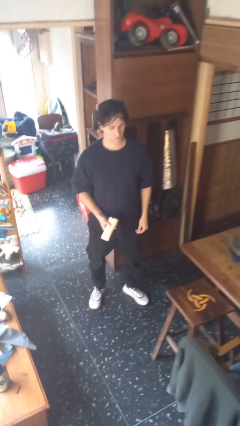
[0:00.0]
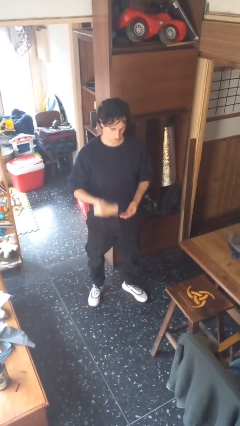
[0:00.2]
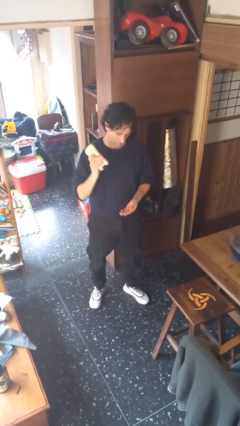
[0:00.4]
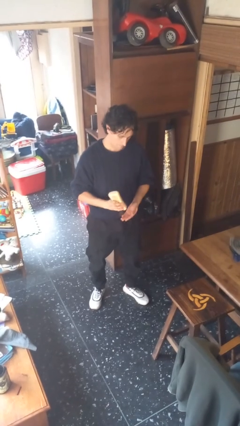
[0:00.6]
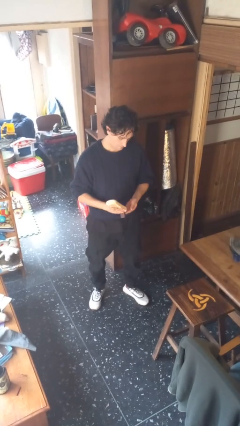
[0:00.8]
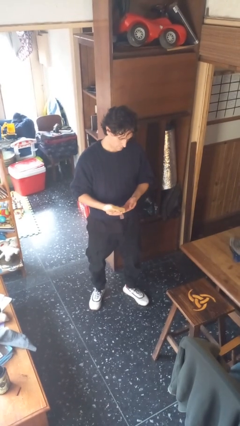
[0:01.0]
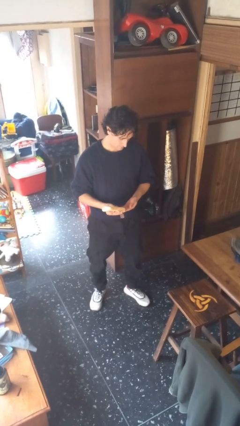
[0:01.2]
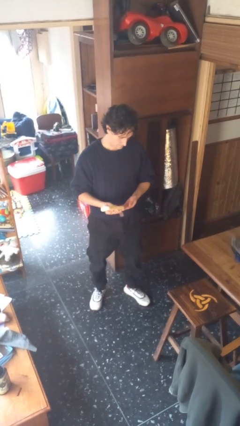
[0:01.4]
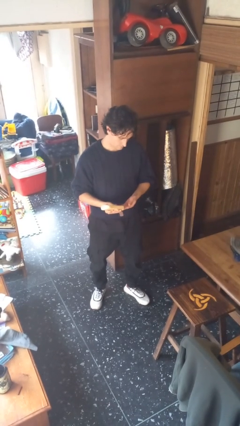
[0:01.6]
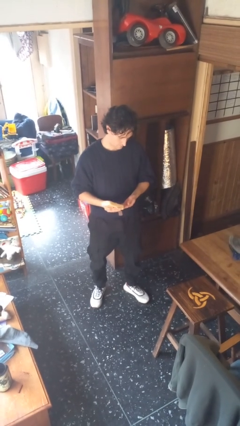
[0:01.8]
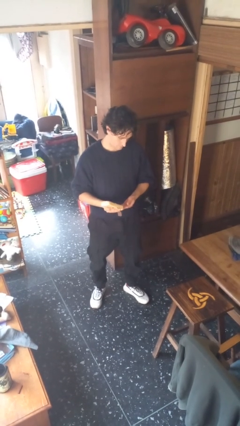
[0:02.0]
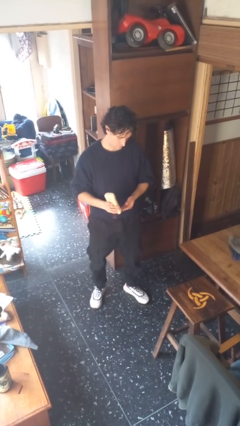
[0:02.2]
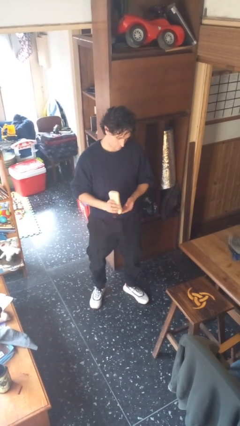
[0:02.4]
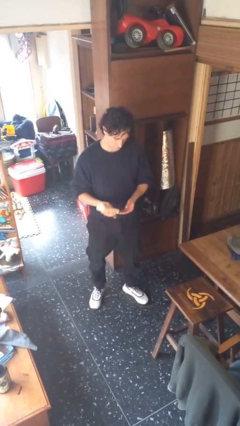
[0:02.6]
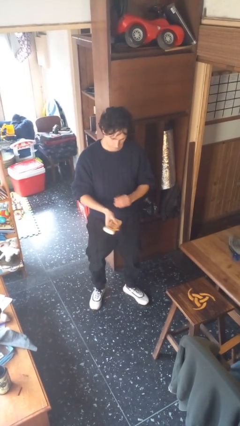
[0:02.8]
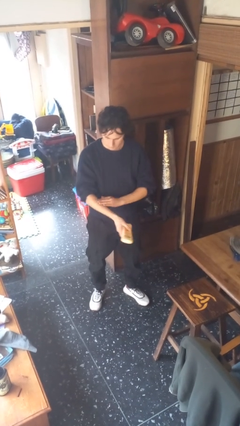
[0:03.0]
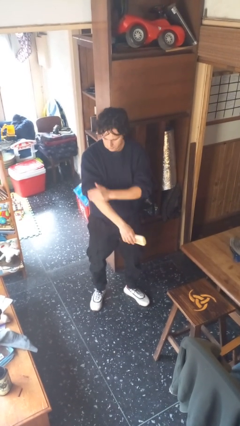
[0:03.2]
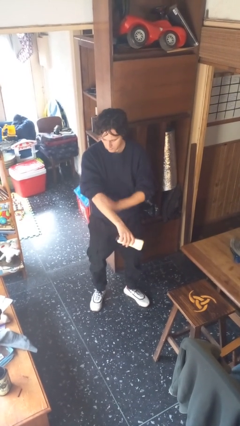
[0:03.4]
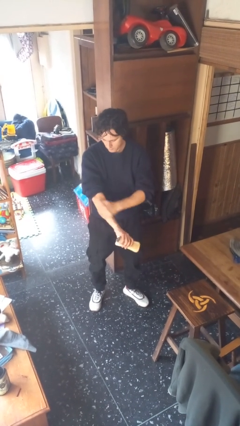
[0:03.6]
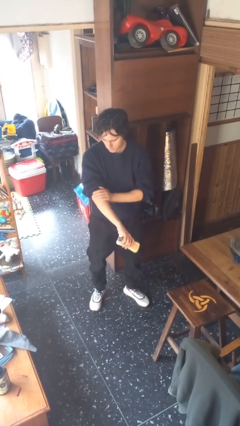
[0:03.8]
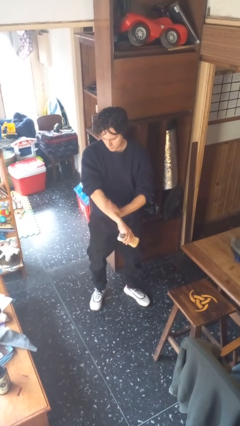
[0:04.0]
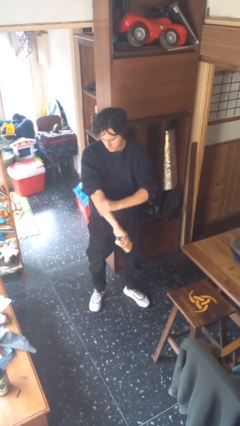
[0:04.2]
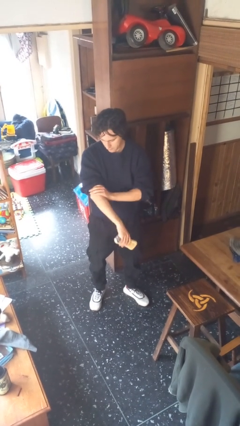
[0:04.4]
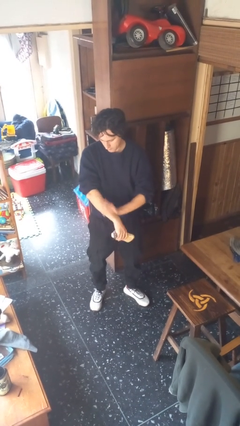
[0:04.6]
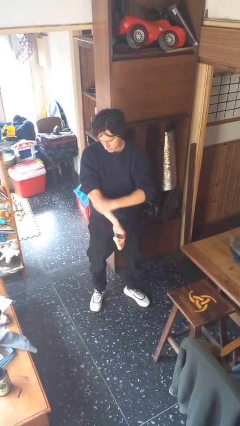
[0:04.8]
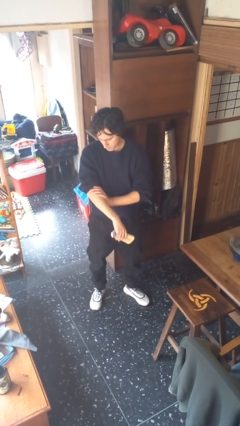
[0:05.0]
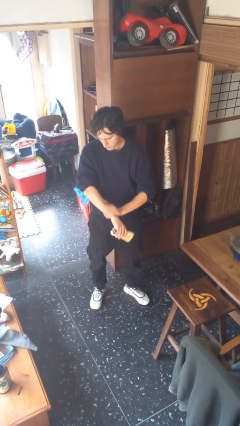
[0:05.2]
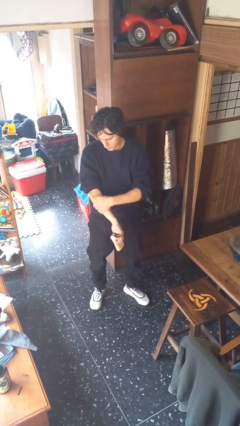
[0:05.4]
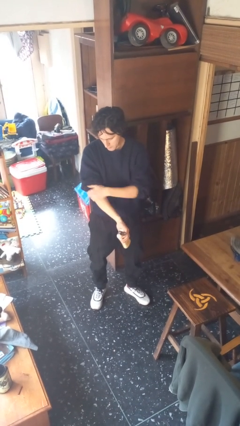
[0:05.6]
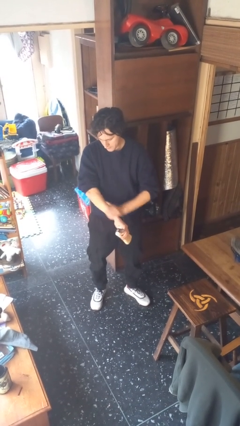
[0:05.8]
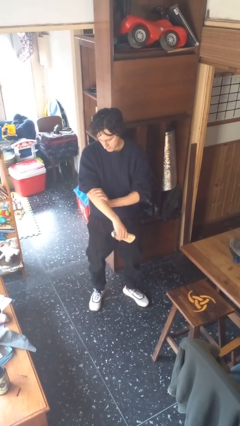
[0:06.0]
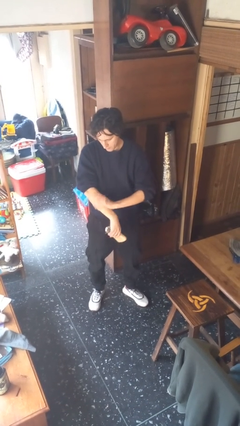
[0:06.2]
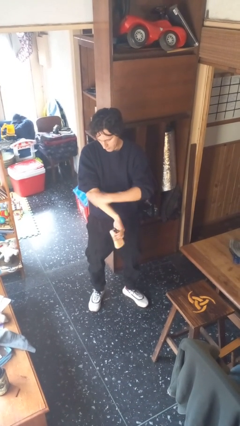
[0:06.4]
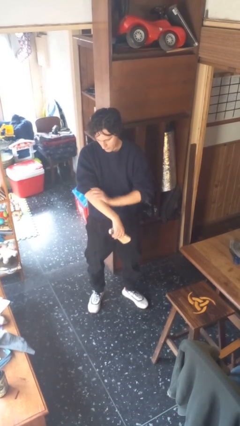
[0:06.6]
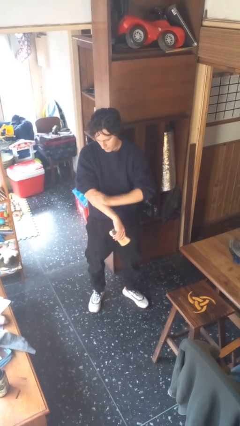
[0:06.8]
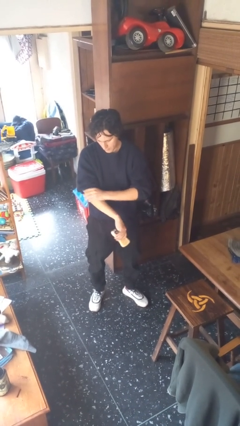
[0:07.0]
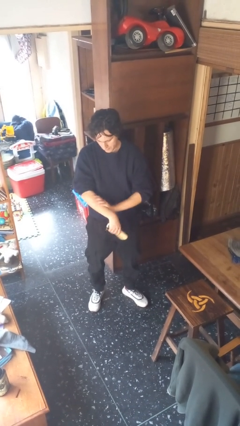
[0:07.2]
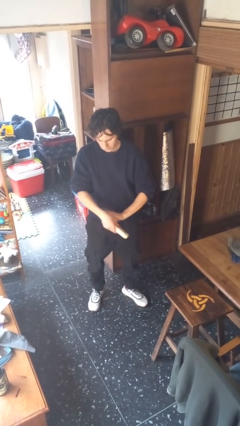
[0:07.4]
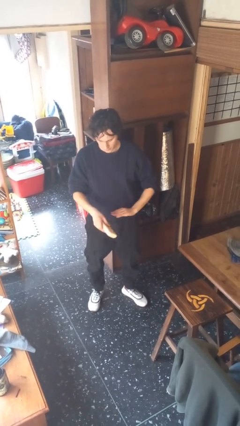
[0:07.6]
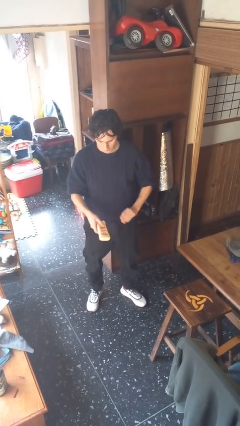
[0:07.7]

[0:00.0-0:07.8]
person applies sunscreen

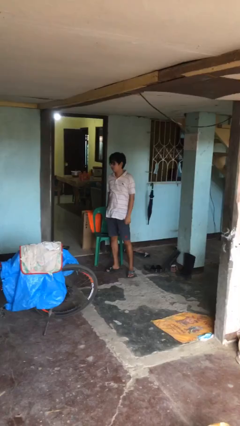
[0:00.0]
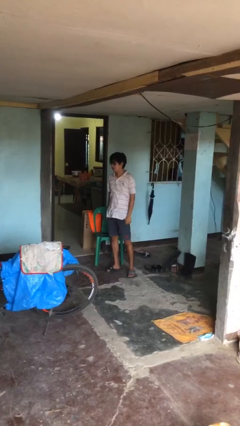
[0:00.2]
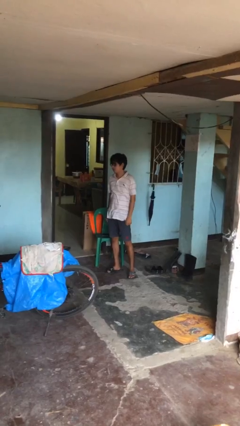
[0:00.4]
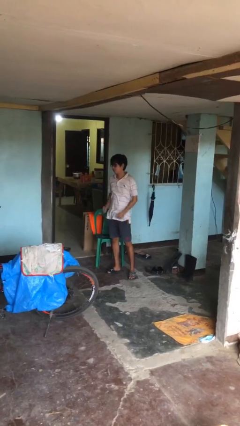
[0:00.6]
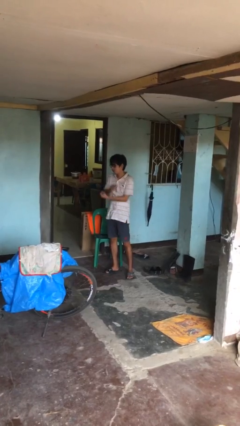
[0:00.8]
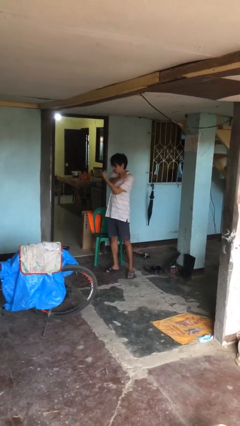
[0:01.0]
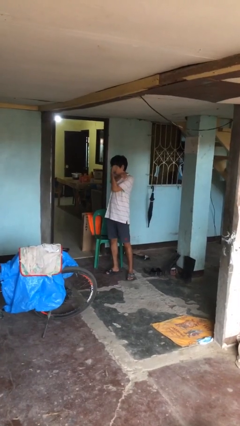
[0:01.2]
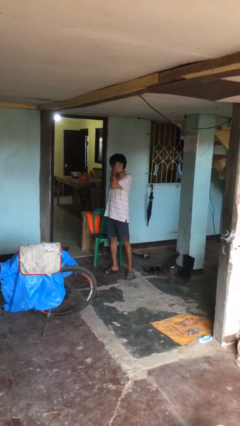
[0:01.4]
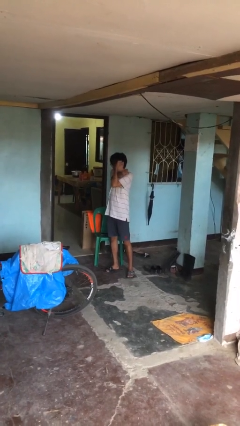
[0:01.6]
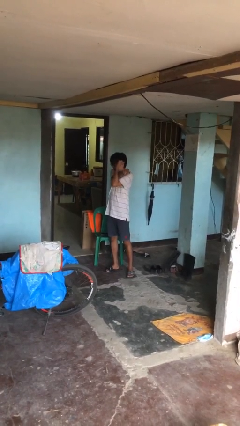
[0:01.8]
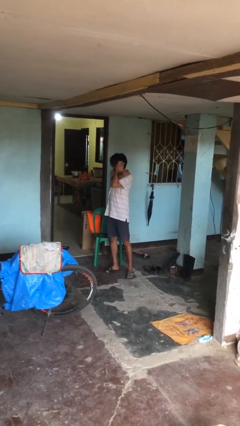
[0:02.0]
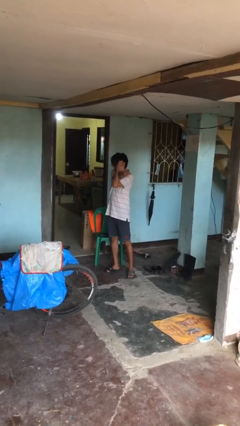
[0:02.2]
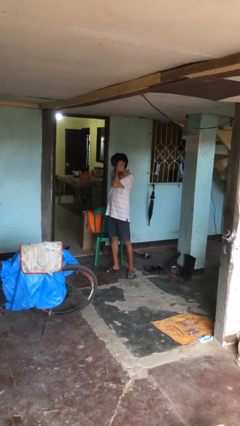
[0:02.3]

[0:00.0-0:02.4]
person crosses arms

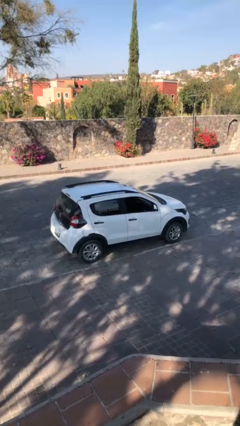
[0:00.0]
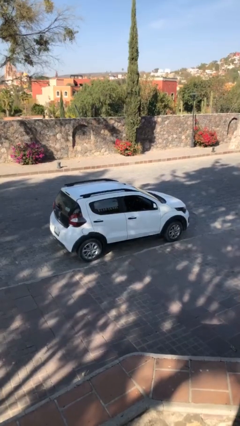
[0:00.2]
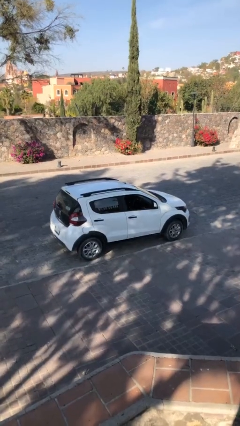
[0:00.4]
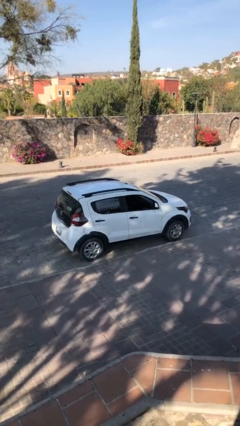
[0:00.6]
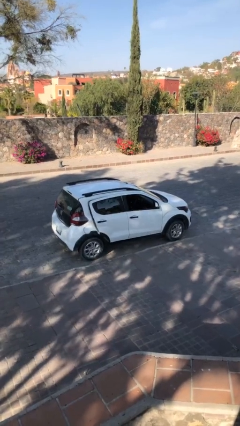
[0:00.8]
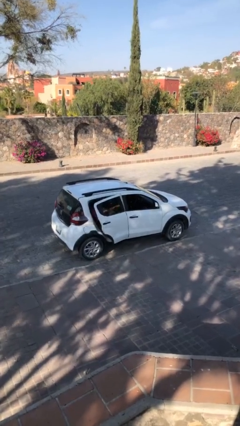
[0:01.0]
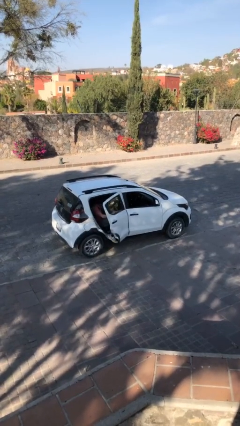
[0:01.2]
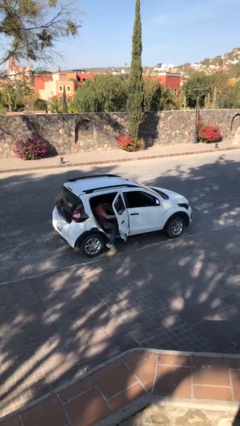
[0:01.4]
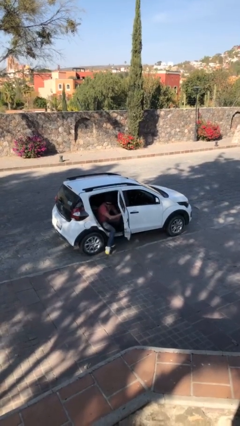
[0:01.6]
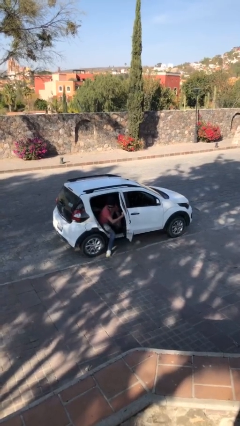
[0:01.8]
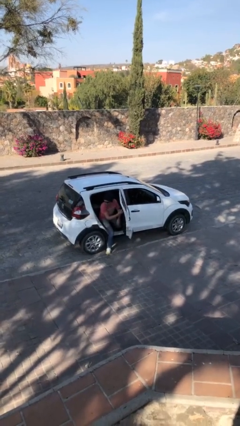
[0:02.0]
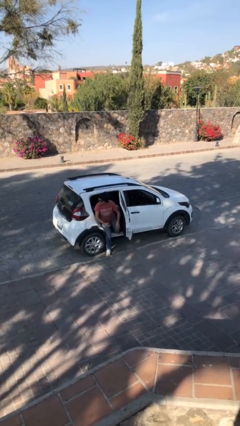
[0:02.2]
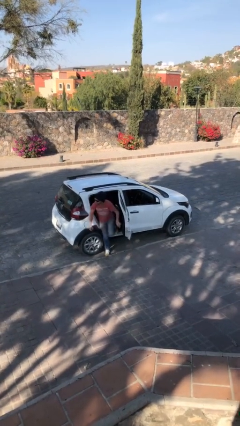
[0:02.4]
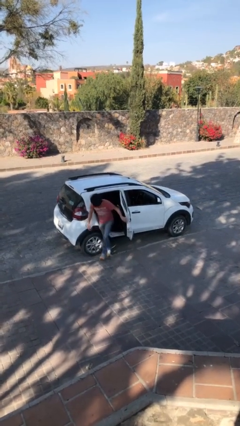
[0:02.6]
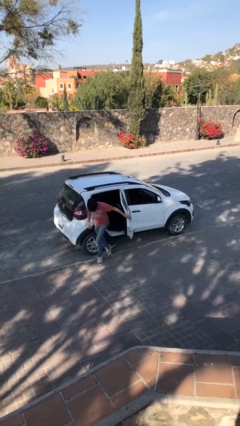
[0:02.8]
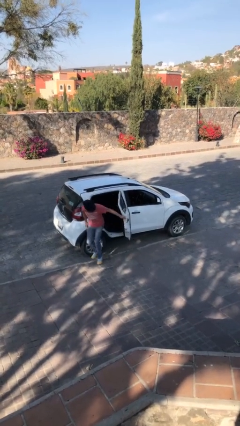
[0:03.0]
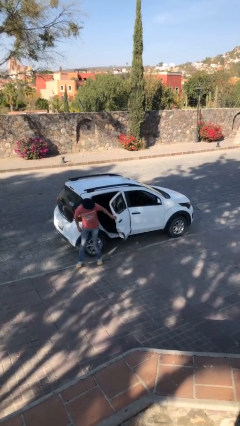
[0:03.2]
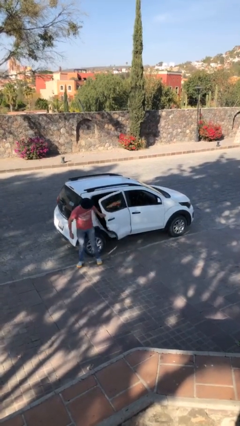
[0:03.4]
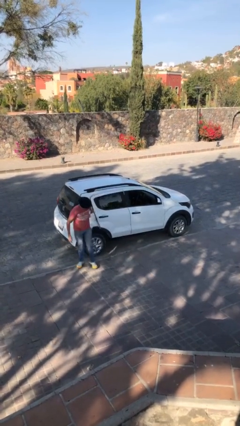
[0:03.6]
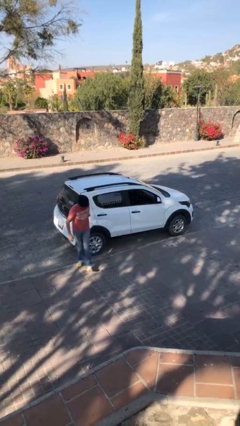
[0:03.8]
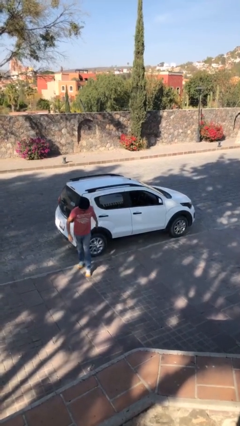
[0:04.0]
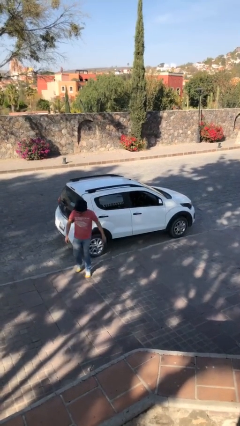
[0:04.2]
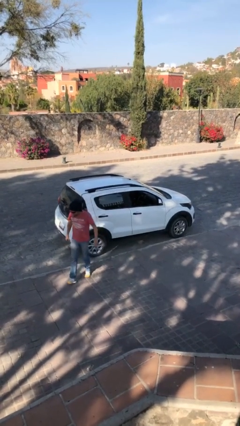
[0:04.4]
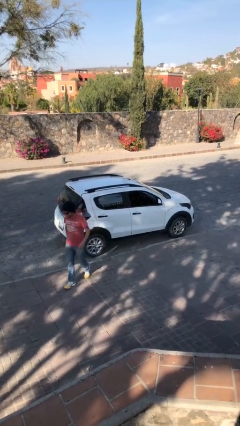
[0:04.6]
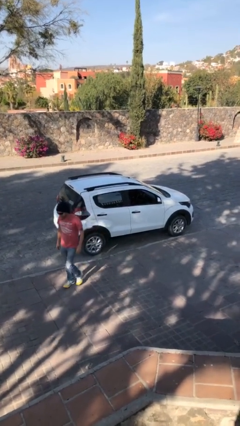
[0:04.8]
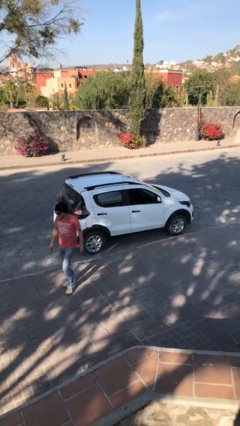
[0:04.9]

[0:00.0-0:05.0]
car drops off person

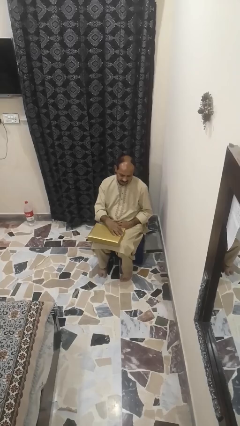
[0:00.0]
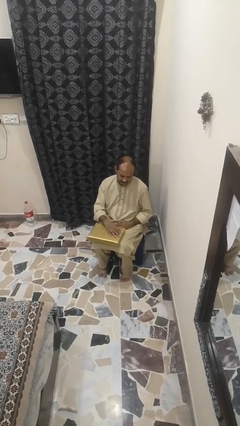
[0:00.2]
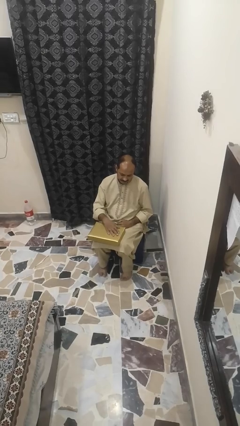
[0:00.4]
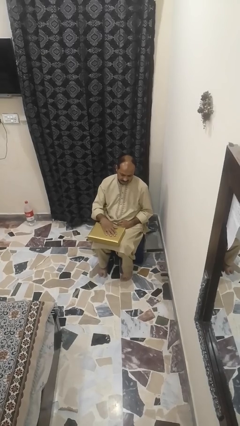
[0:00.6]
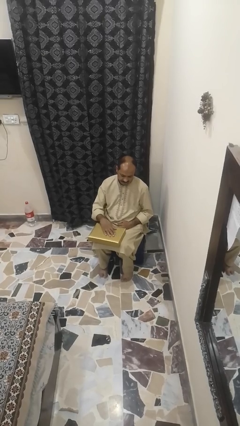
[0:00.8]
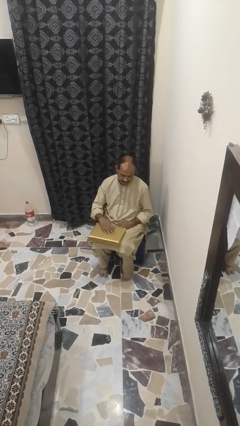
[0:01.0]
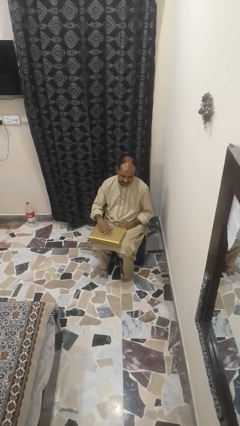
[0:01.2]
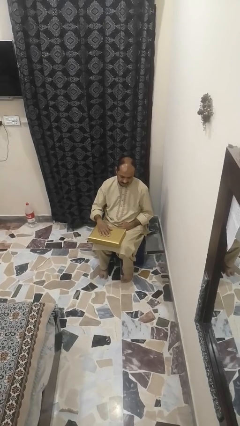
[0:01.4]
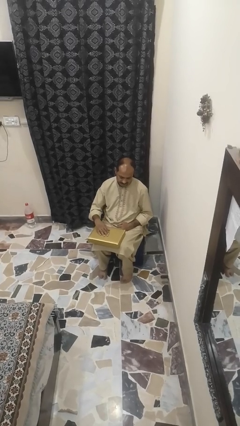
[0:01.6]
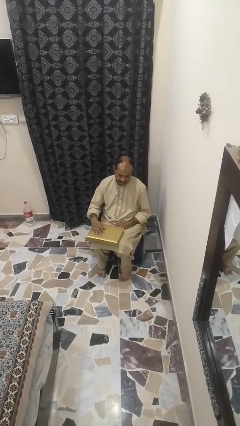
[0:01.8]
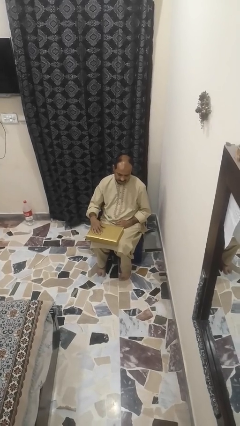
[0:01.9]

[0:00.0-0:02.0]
person waves hand over object

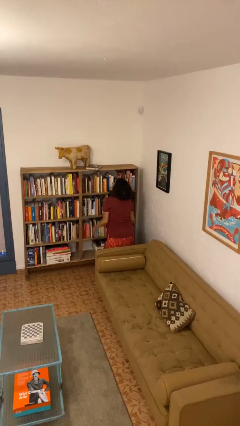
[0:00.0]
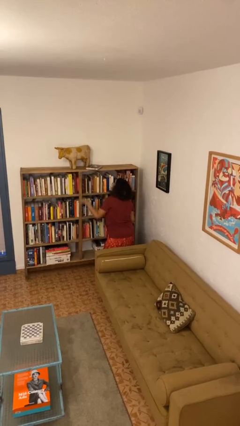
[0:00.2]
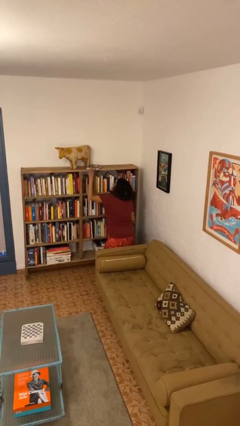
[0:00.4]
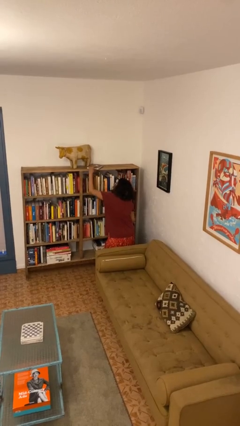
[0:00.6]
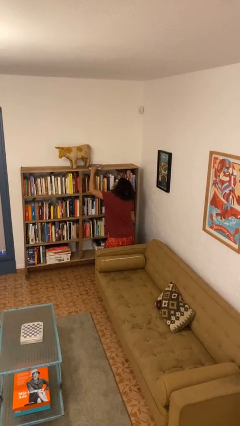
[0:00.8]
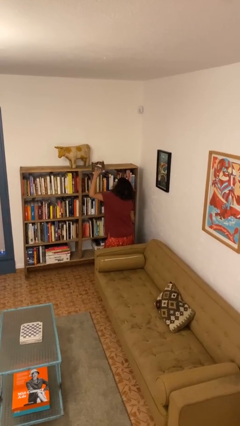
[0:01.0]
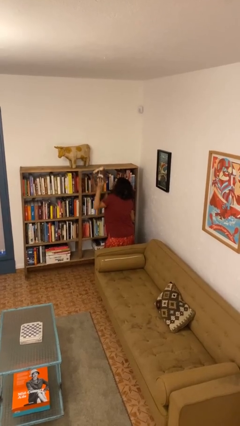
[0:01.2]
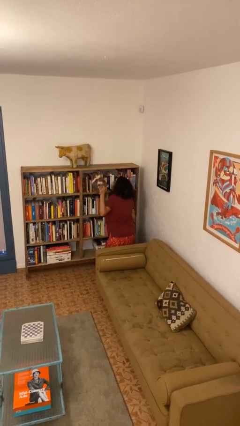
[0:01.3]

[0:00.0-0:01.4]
person picks up object from shelf
